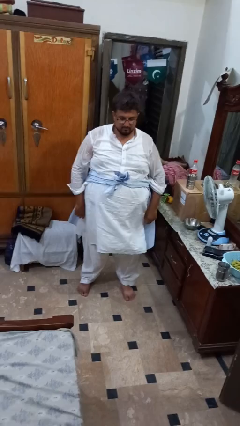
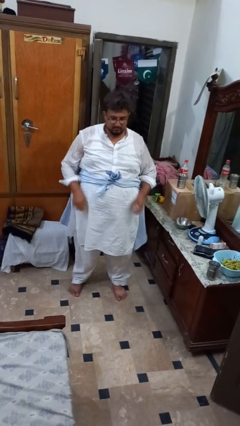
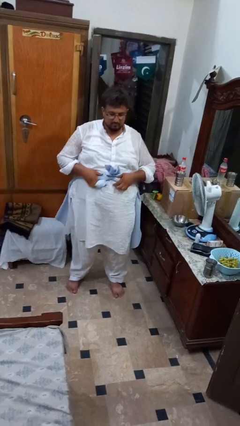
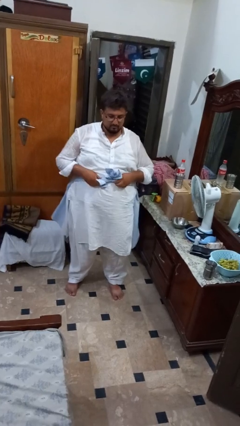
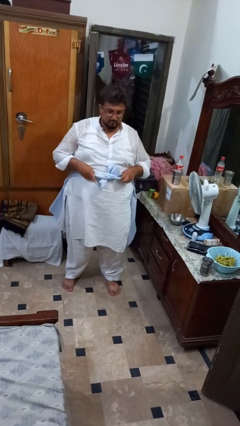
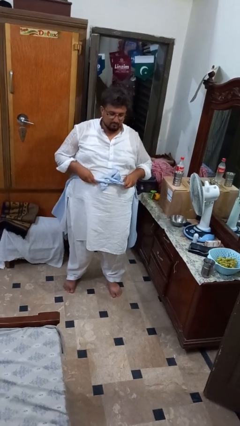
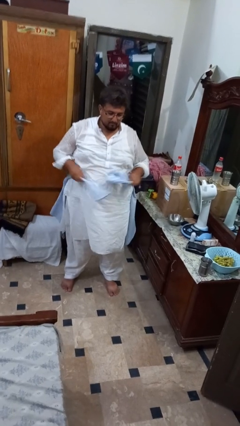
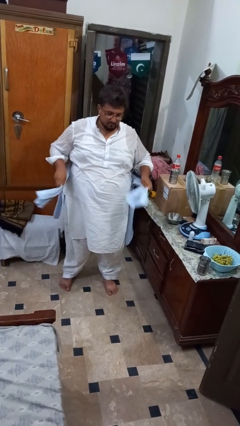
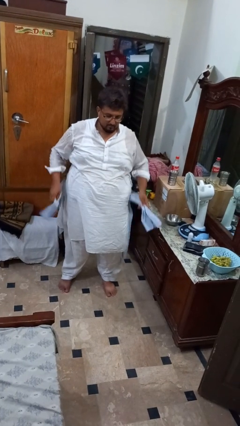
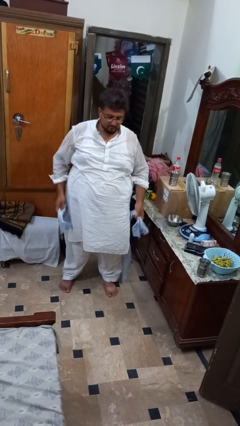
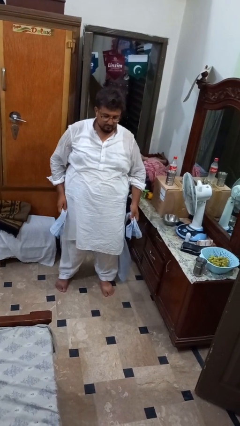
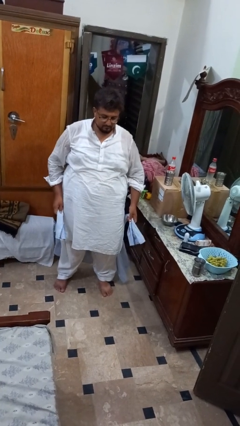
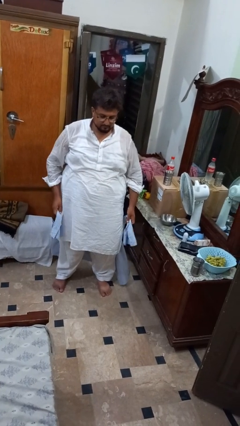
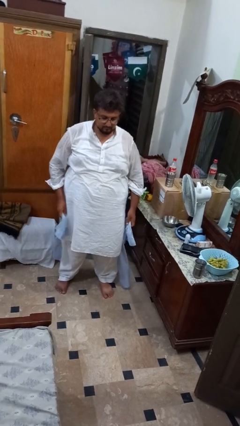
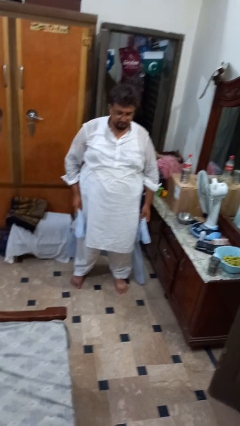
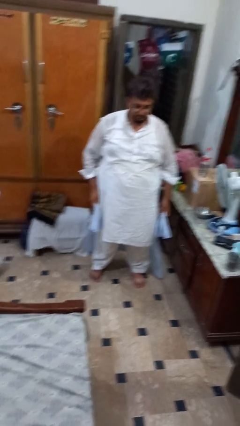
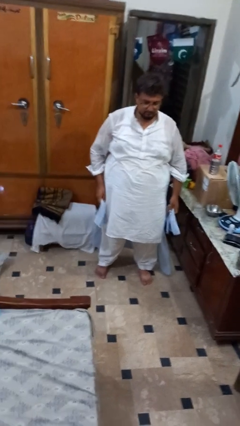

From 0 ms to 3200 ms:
person unties jacket around waist

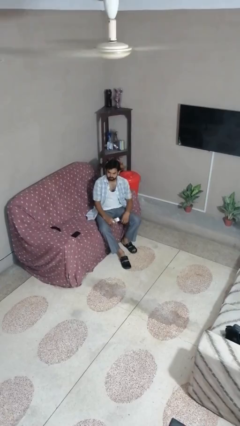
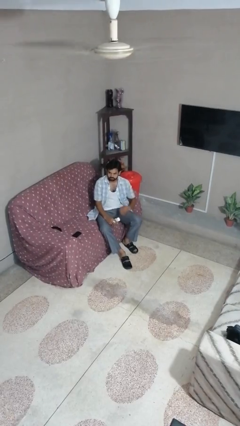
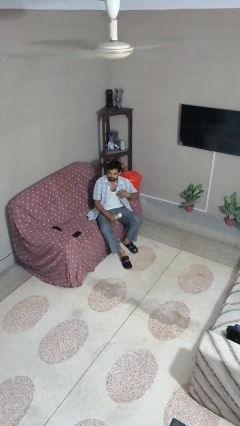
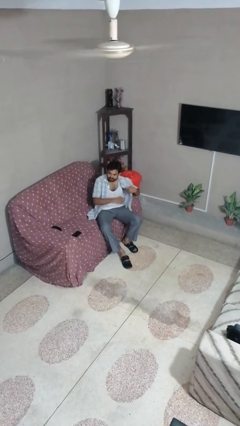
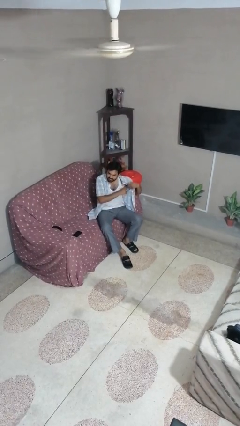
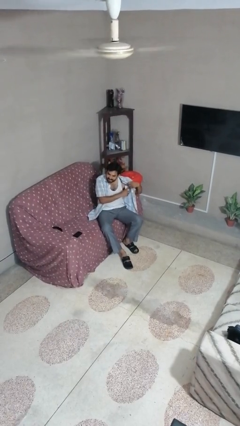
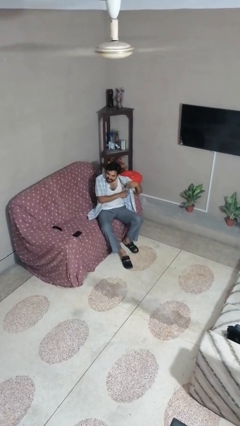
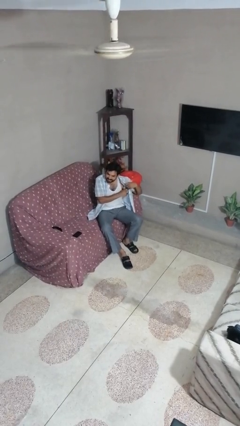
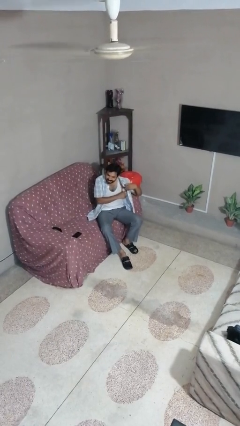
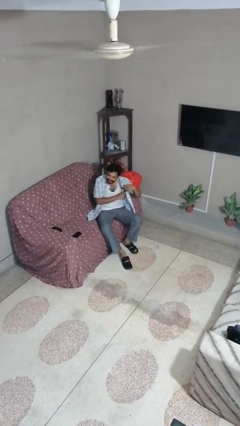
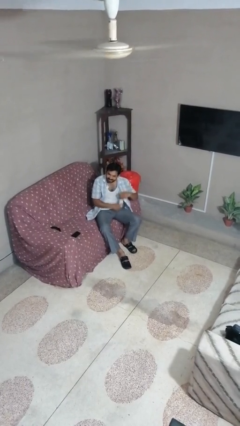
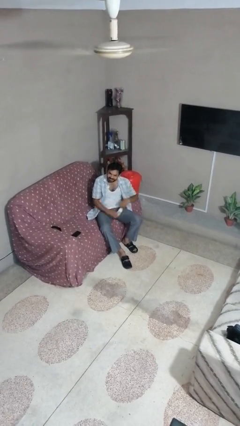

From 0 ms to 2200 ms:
person applies deodorant

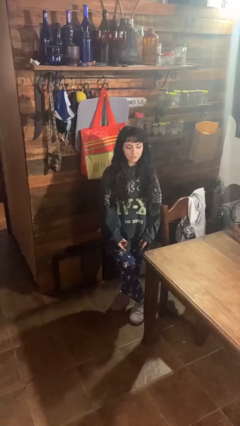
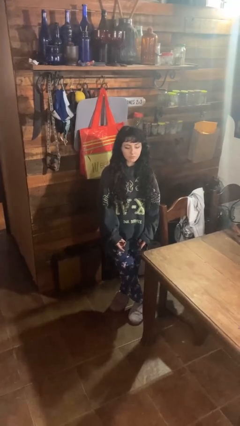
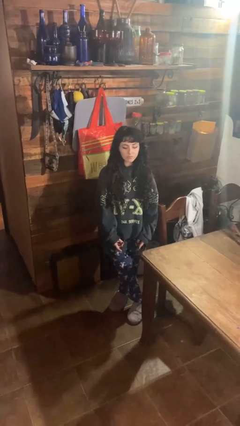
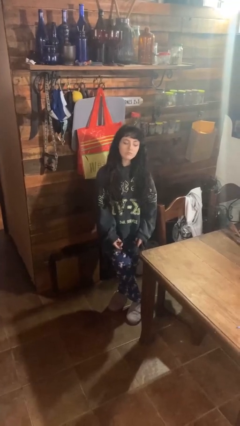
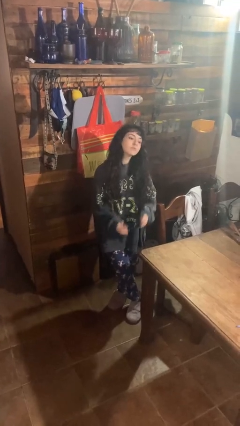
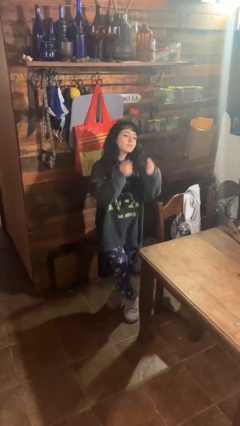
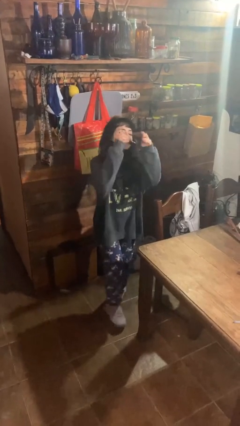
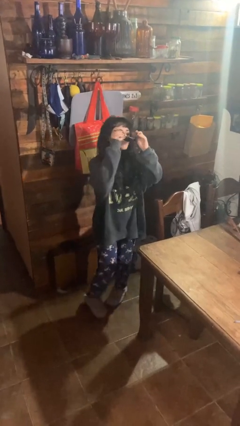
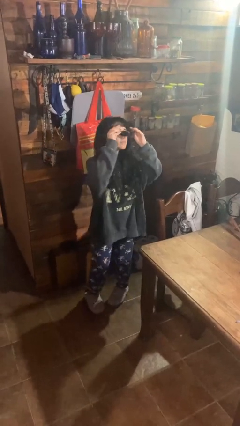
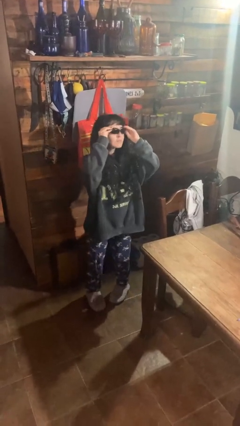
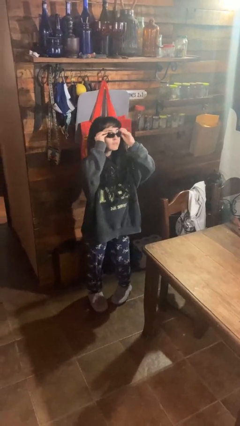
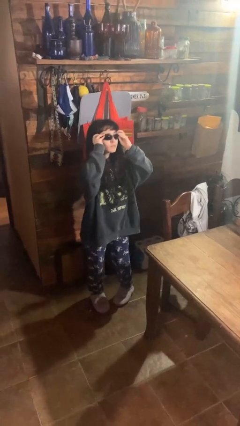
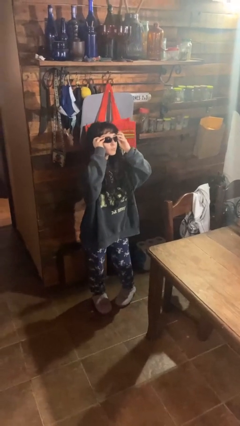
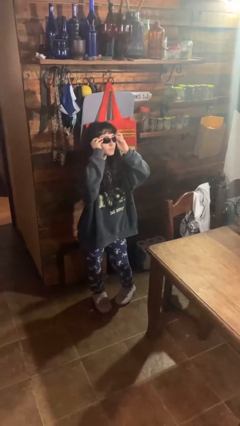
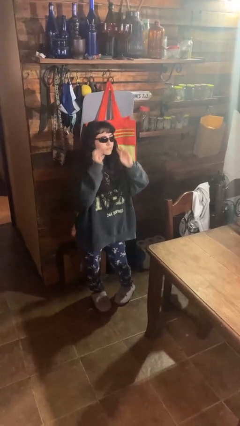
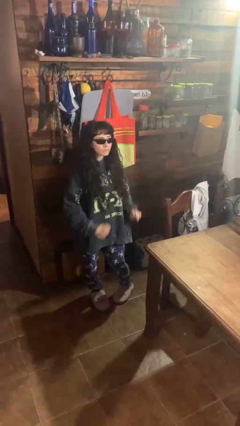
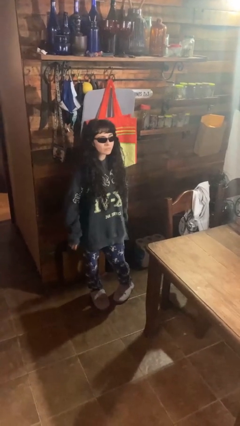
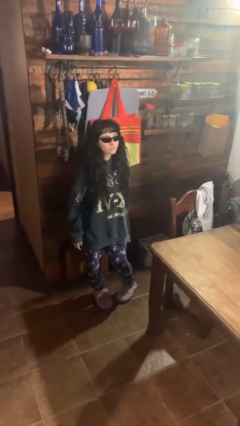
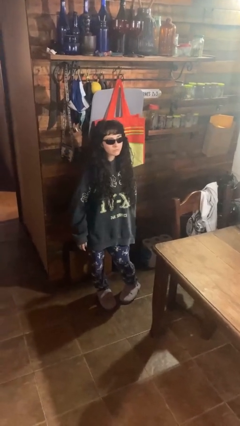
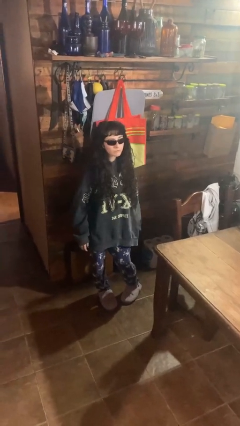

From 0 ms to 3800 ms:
person puts on sunglasses

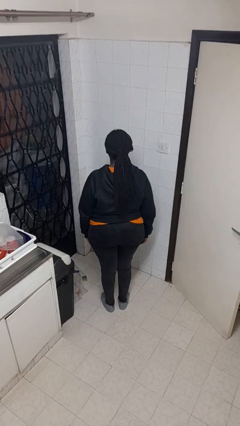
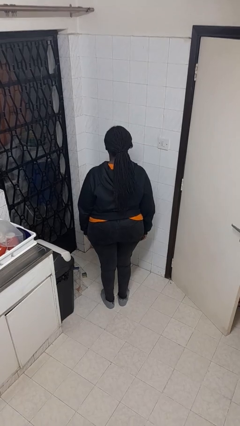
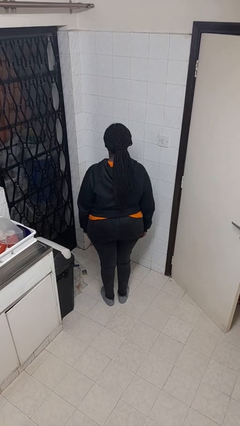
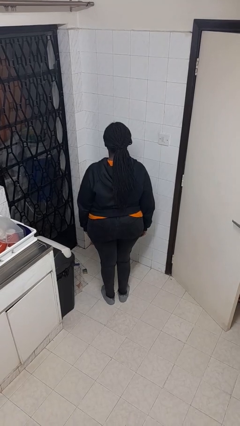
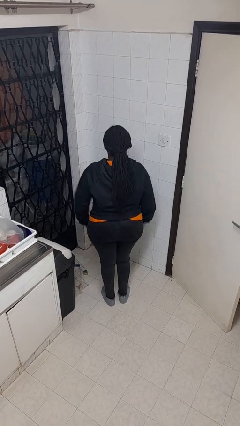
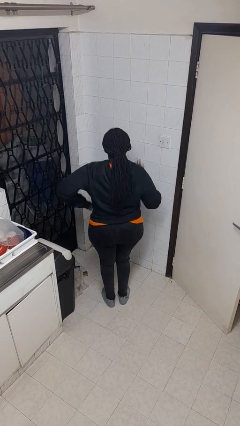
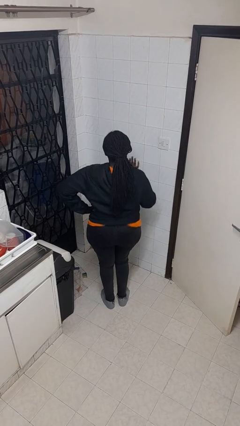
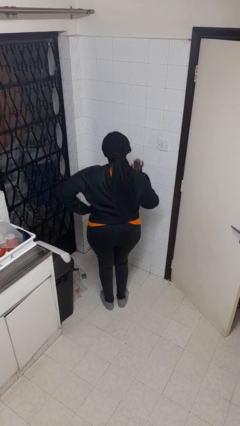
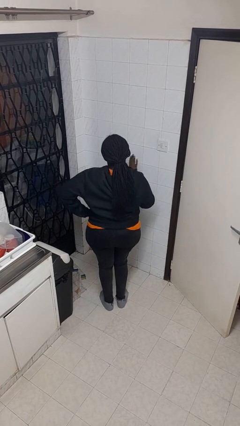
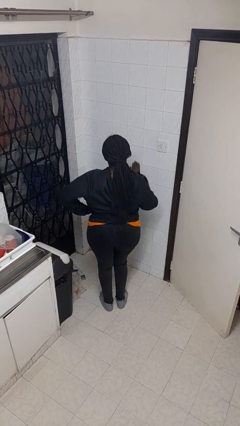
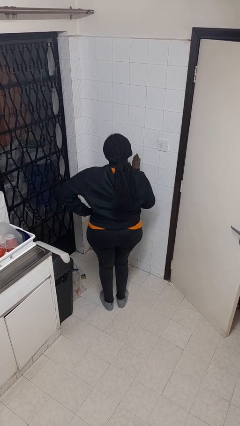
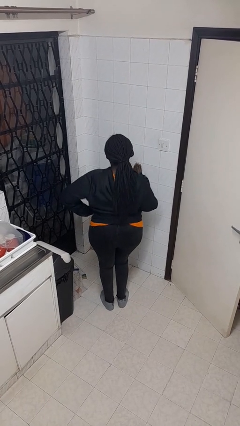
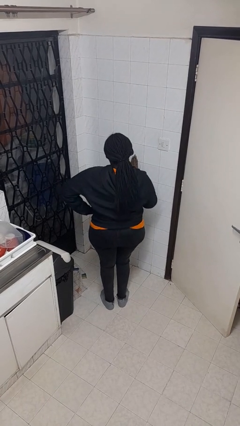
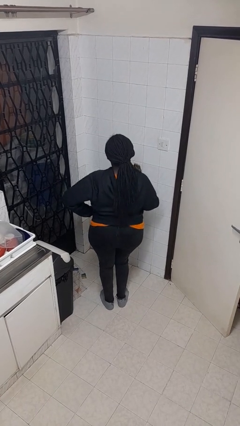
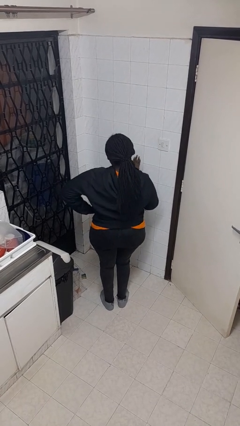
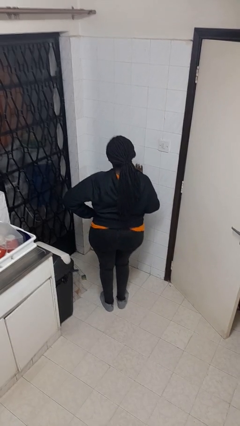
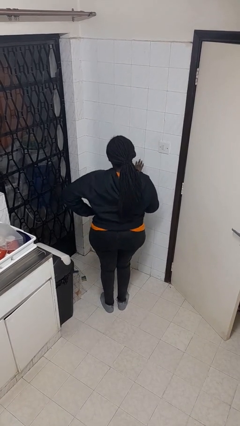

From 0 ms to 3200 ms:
person dances in place

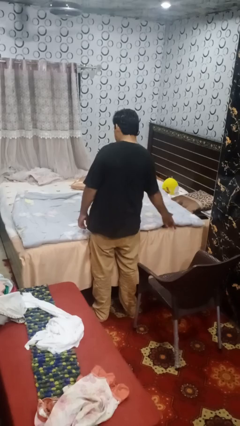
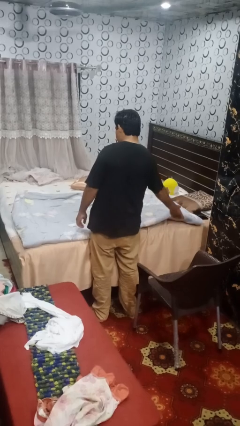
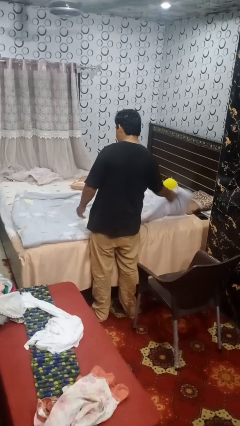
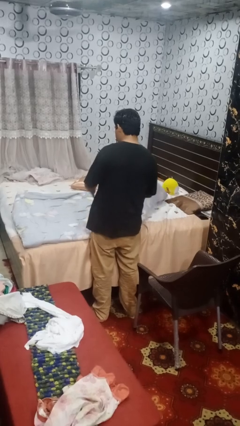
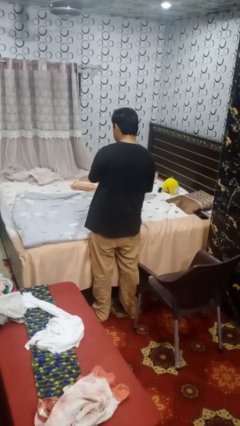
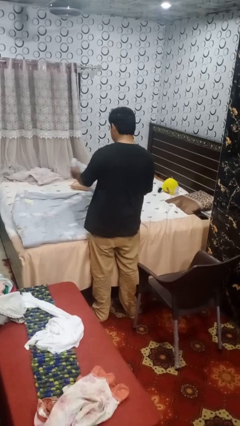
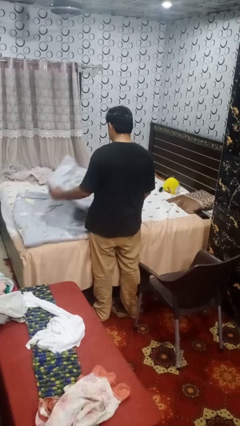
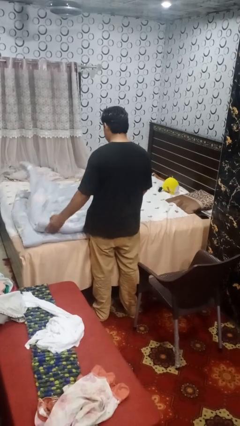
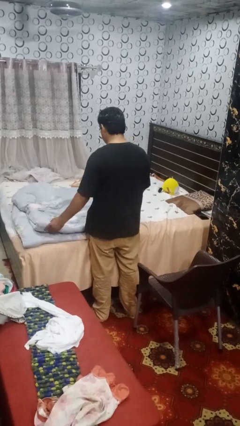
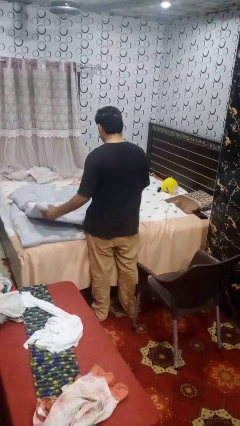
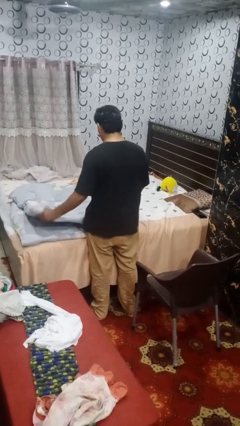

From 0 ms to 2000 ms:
person folds blanket

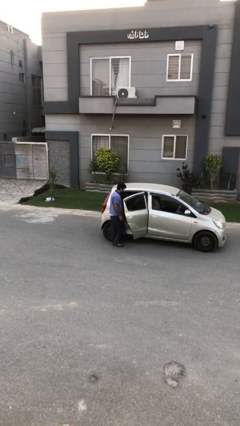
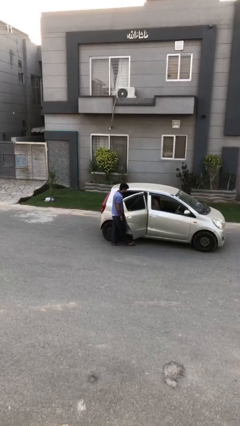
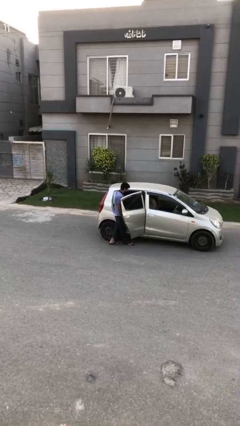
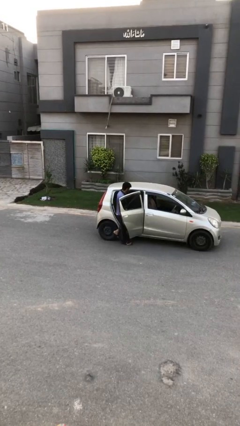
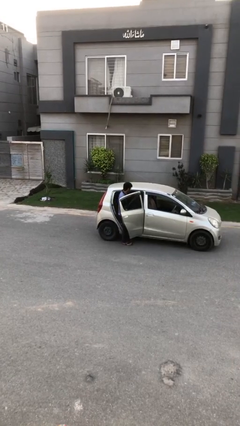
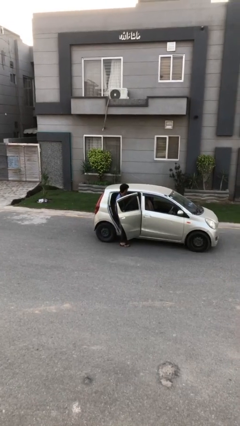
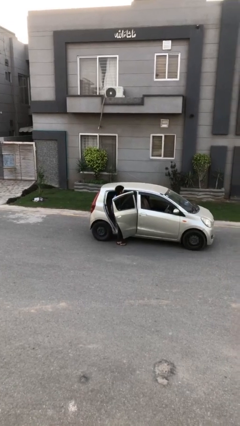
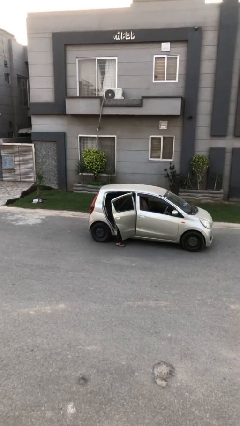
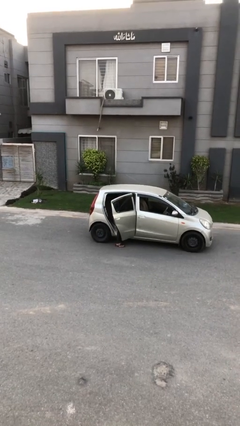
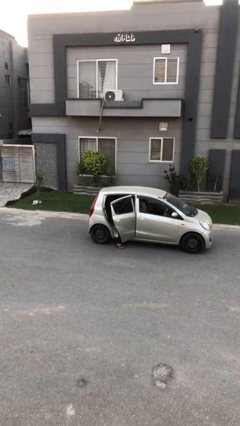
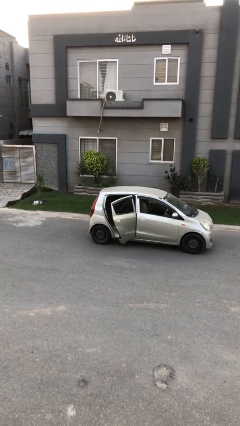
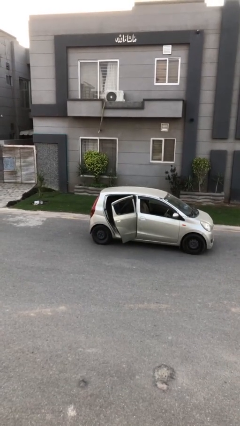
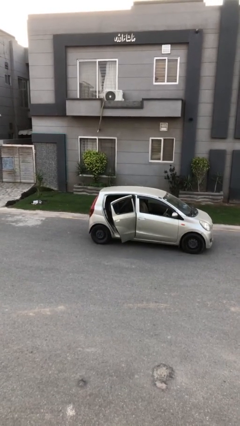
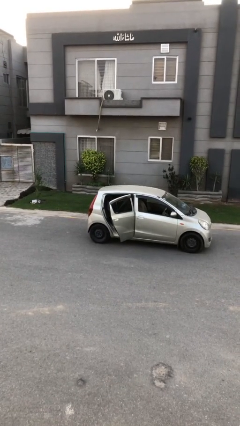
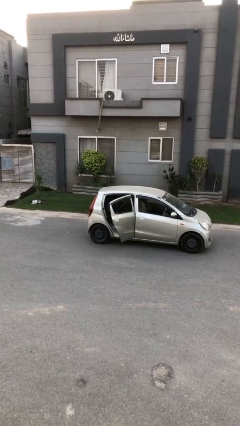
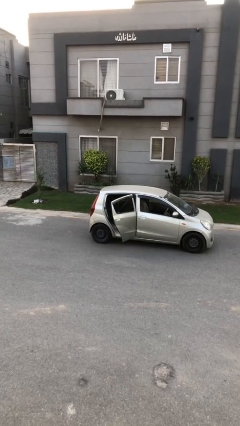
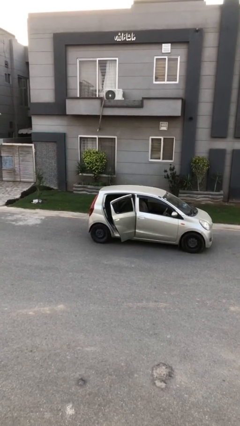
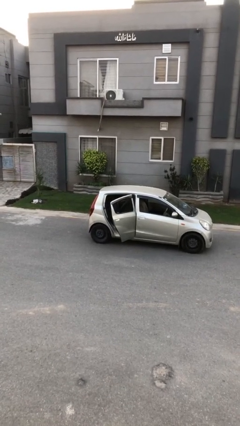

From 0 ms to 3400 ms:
person enters car
